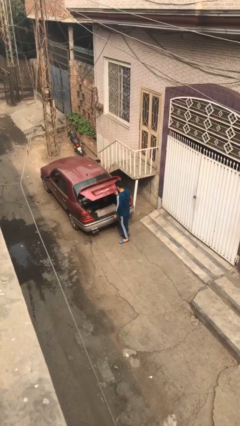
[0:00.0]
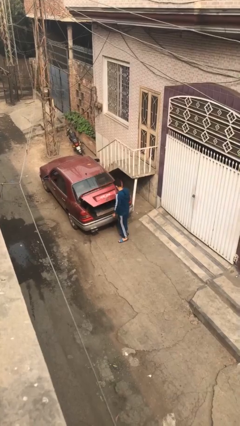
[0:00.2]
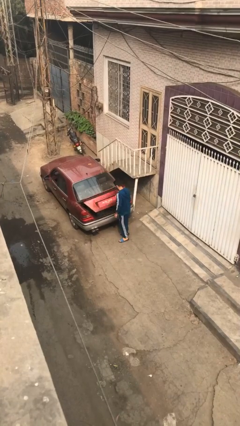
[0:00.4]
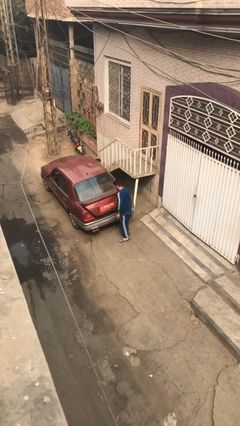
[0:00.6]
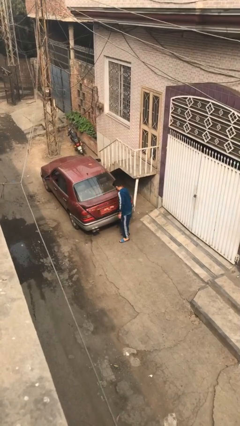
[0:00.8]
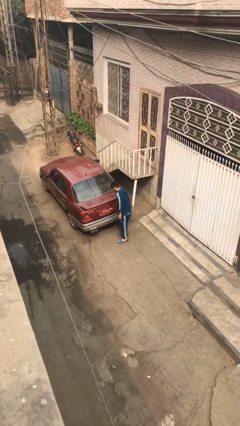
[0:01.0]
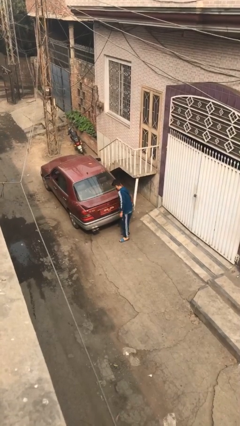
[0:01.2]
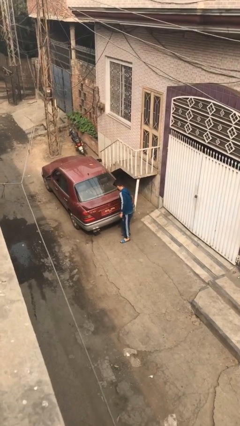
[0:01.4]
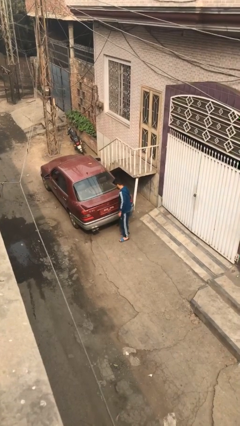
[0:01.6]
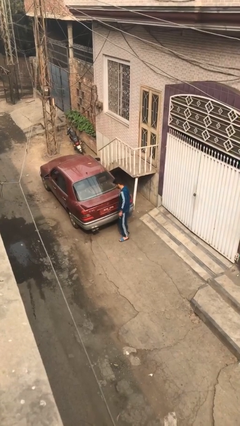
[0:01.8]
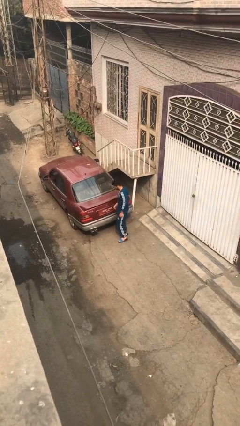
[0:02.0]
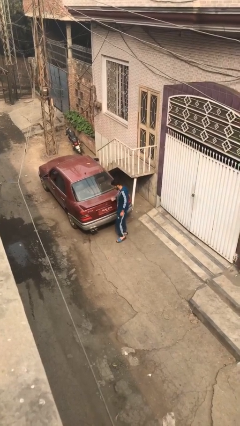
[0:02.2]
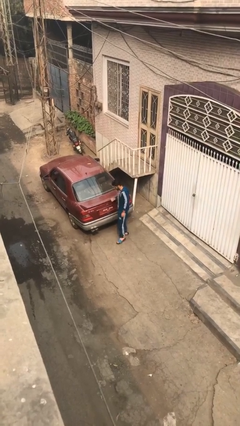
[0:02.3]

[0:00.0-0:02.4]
person closes car trunk

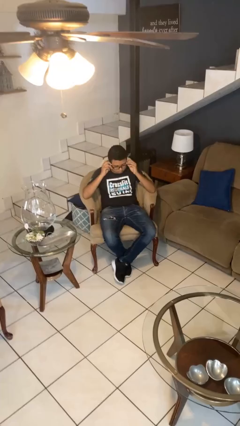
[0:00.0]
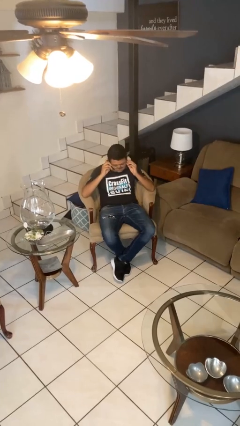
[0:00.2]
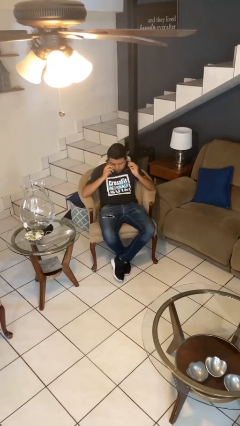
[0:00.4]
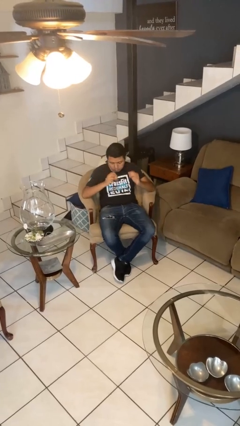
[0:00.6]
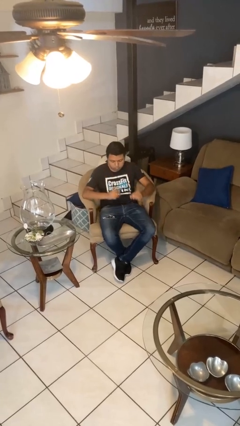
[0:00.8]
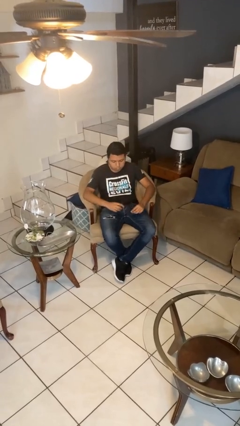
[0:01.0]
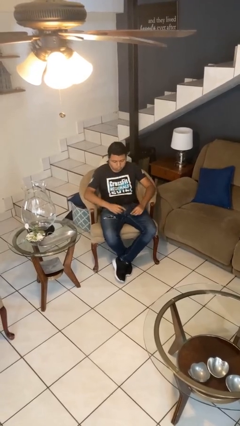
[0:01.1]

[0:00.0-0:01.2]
person takes off glasses

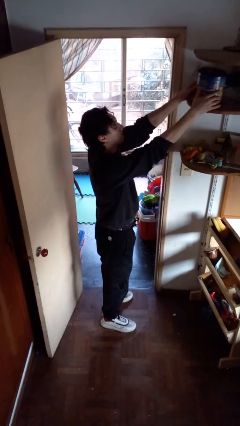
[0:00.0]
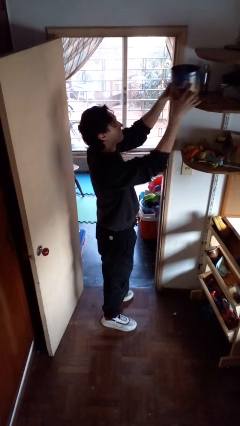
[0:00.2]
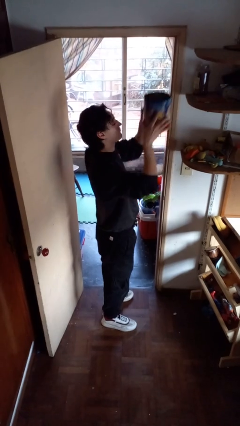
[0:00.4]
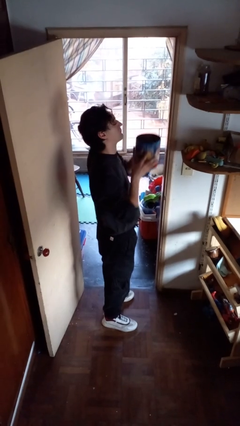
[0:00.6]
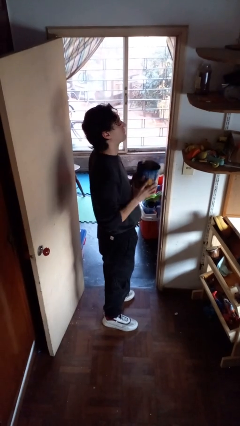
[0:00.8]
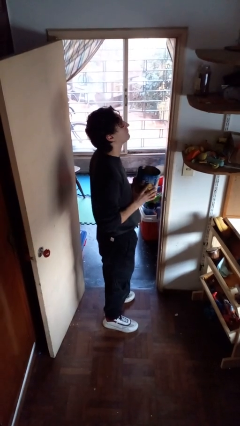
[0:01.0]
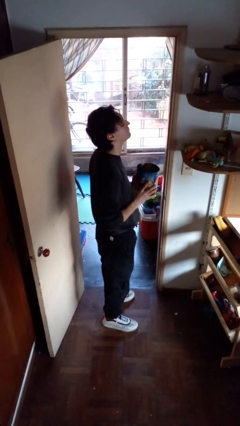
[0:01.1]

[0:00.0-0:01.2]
person picks up object from shelf

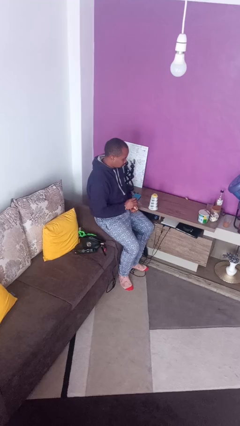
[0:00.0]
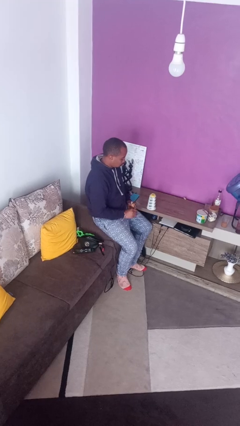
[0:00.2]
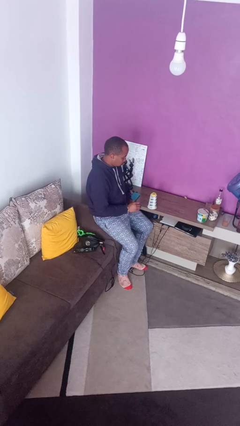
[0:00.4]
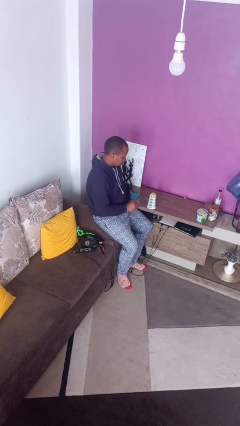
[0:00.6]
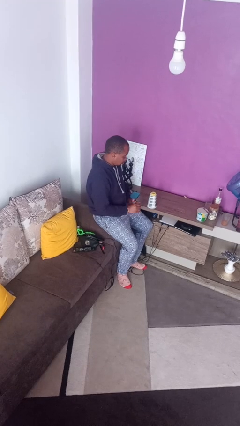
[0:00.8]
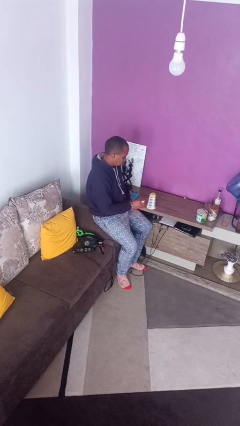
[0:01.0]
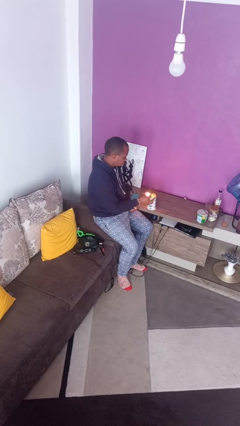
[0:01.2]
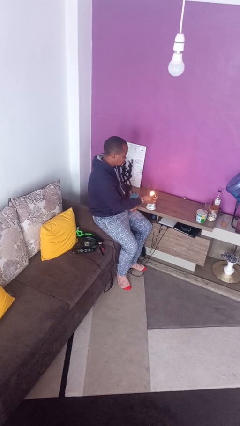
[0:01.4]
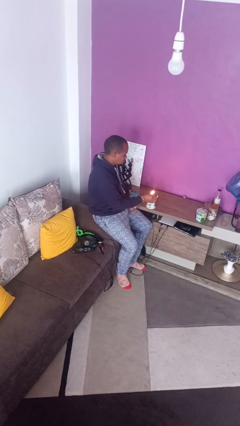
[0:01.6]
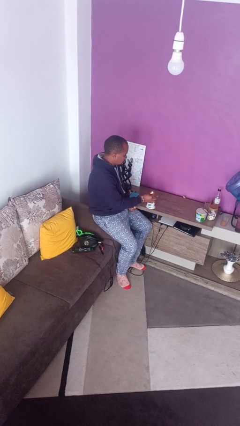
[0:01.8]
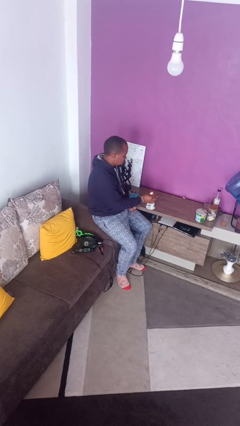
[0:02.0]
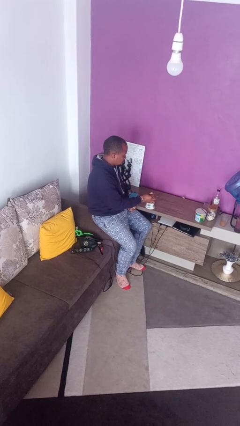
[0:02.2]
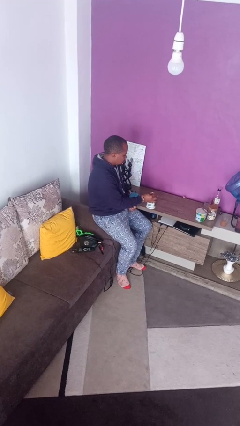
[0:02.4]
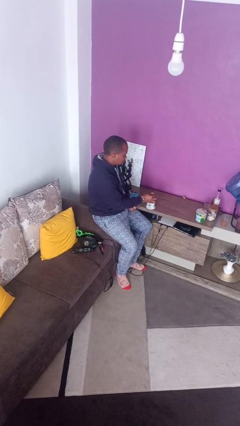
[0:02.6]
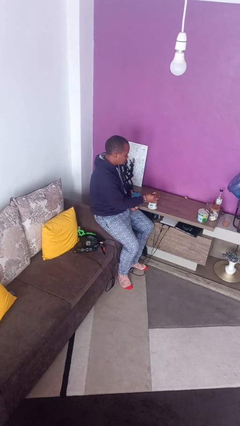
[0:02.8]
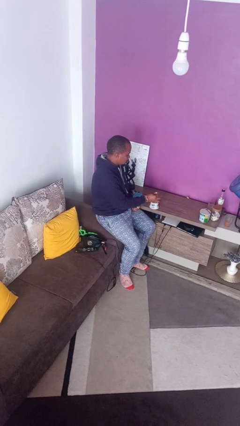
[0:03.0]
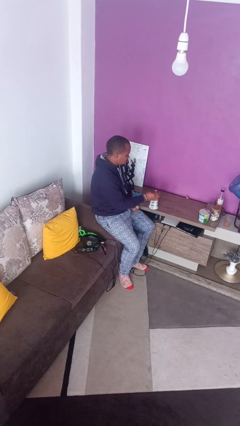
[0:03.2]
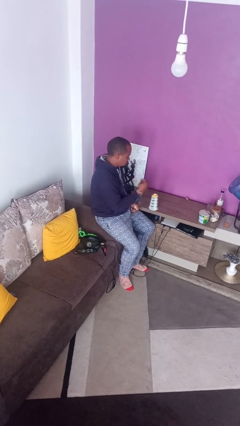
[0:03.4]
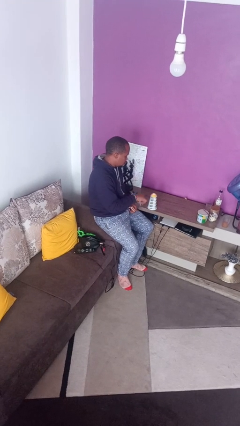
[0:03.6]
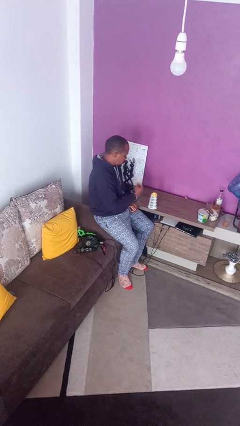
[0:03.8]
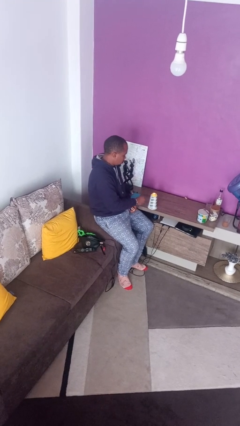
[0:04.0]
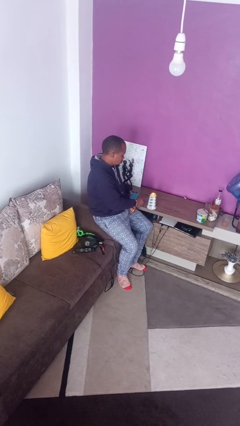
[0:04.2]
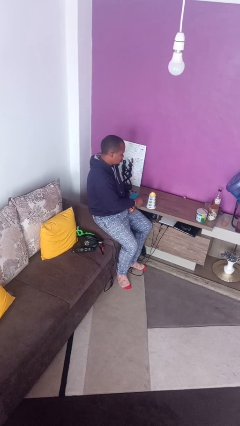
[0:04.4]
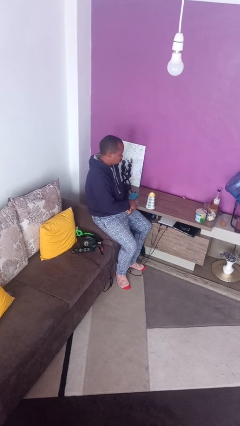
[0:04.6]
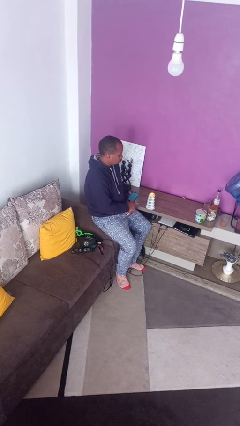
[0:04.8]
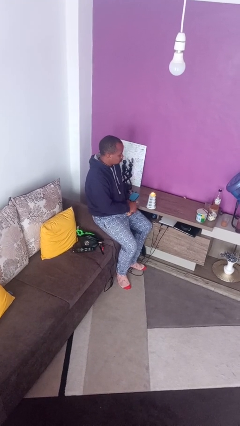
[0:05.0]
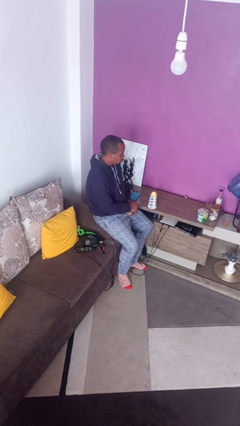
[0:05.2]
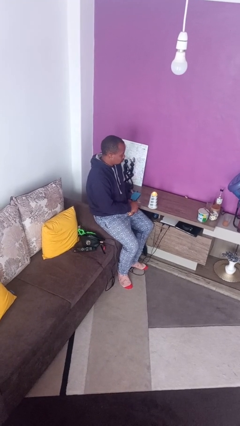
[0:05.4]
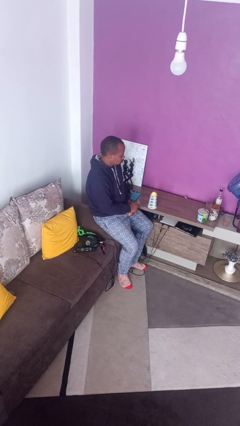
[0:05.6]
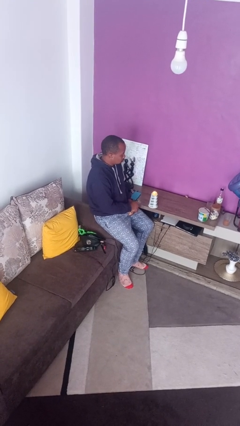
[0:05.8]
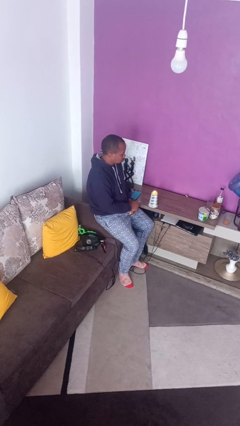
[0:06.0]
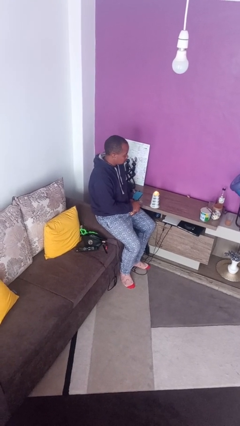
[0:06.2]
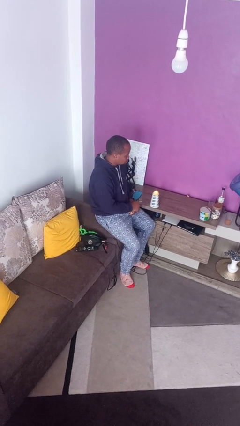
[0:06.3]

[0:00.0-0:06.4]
person lights candle

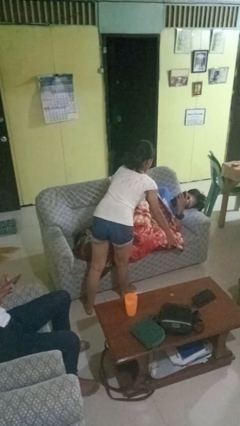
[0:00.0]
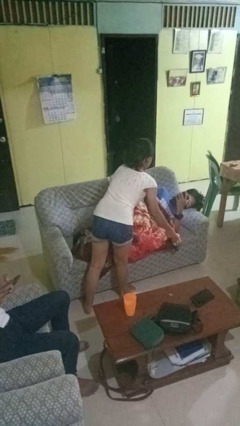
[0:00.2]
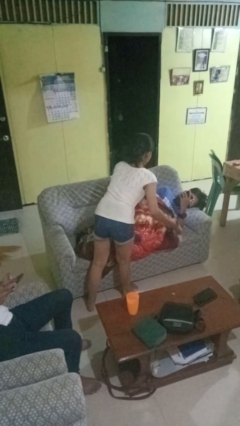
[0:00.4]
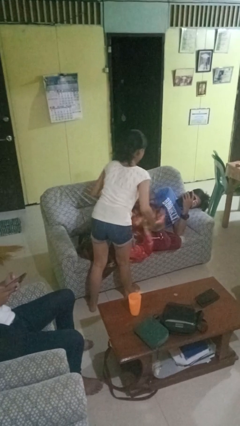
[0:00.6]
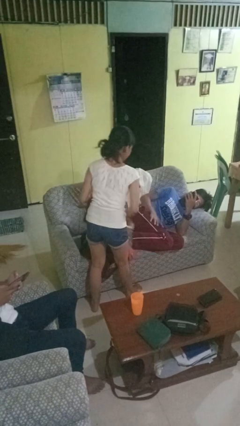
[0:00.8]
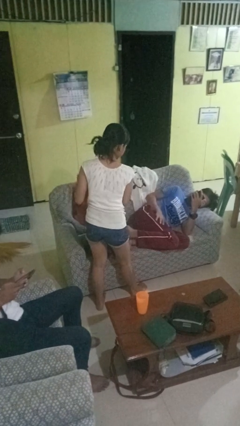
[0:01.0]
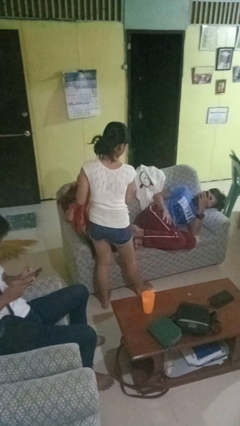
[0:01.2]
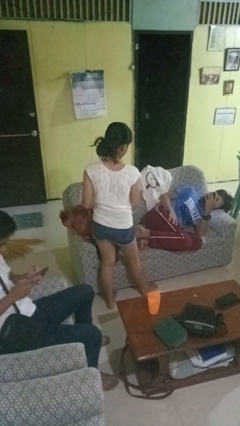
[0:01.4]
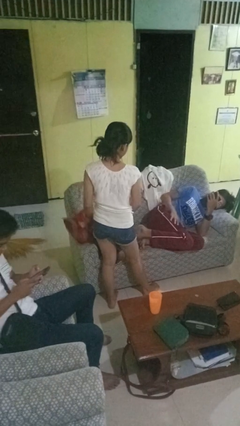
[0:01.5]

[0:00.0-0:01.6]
person uncovers friend with blanket

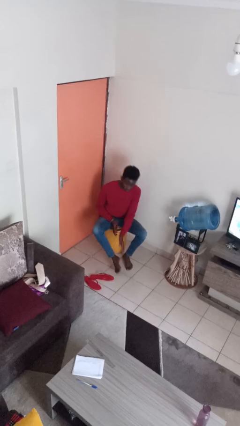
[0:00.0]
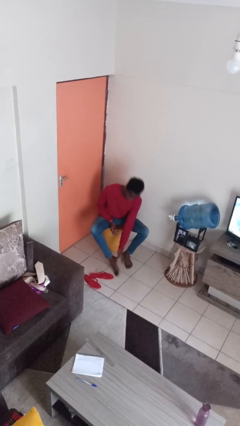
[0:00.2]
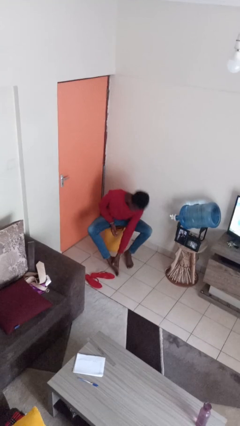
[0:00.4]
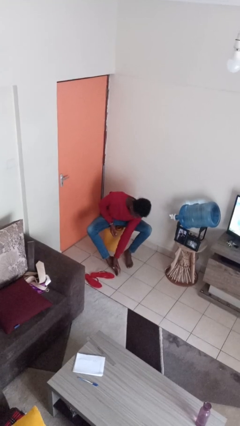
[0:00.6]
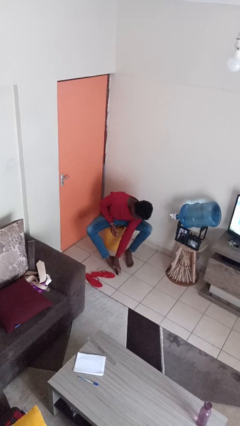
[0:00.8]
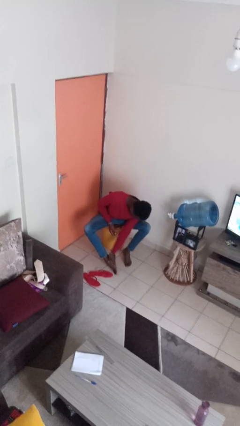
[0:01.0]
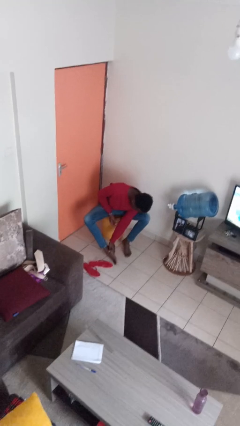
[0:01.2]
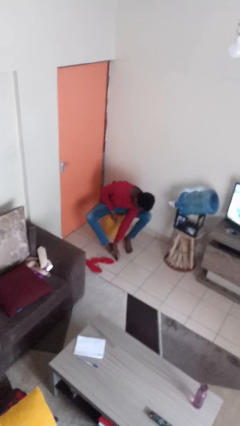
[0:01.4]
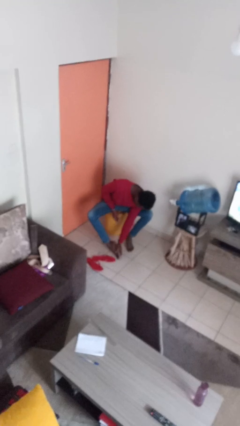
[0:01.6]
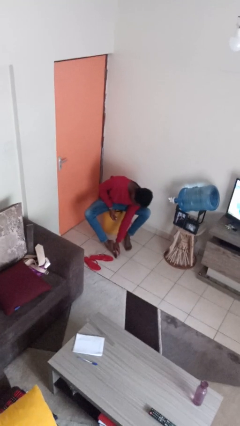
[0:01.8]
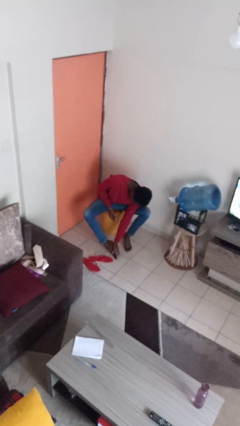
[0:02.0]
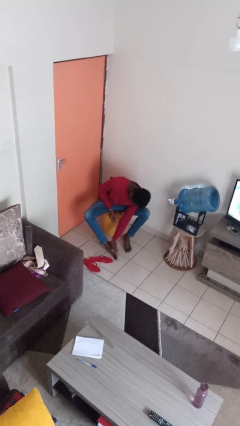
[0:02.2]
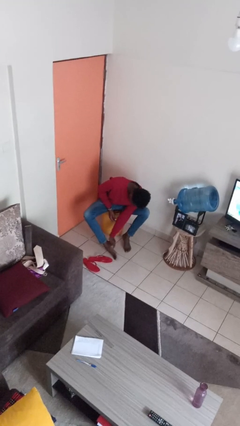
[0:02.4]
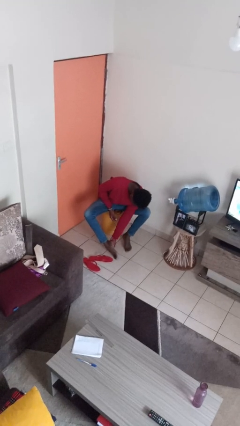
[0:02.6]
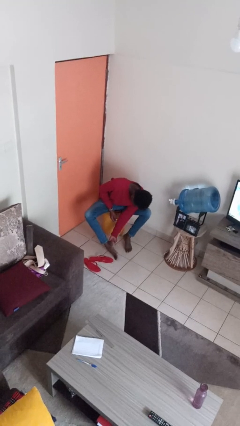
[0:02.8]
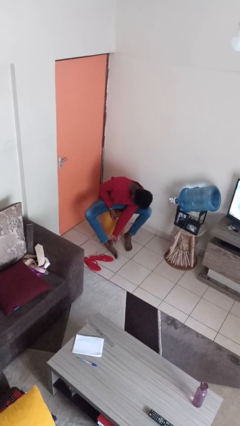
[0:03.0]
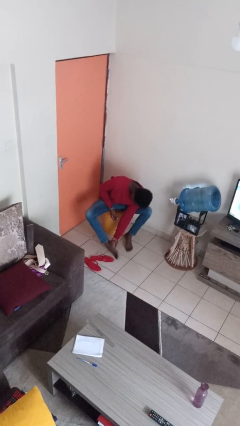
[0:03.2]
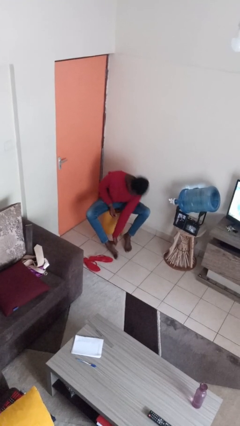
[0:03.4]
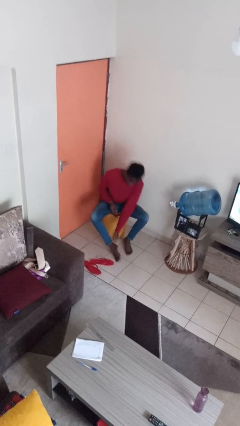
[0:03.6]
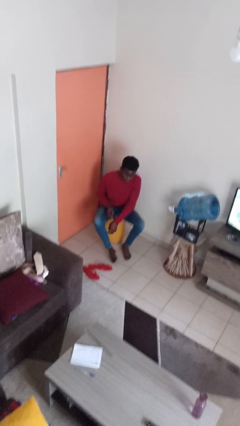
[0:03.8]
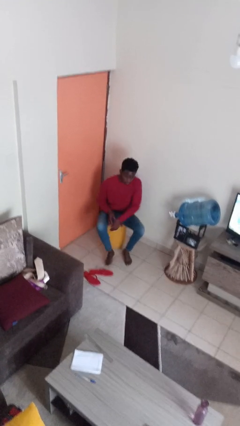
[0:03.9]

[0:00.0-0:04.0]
person rubs foot

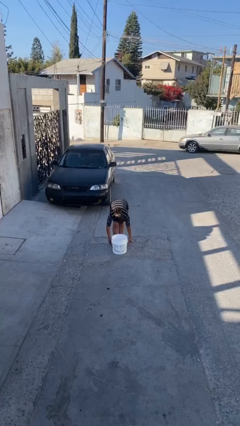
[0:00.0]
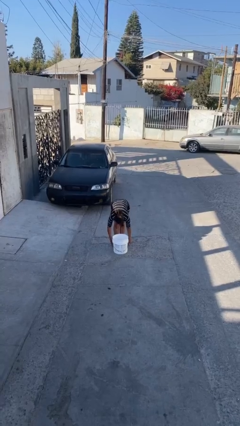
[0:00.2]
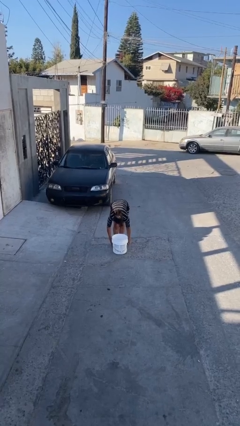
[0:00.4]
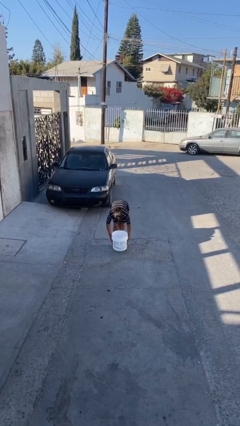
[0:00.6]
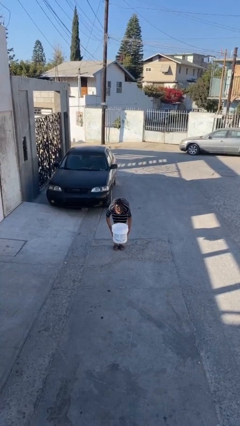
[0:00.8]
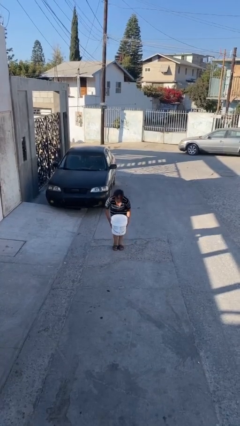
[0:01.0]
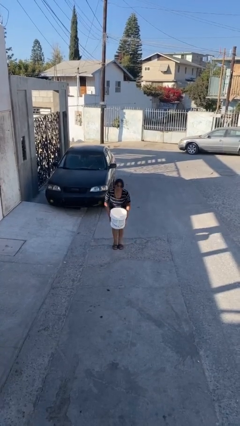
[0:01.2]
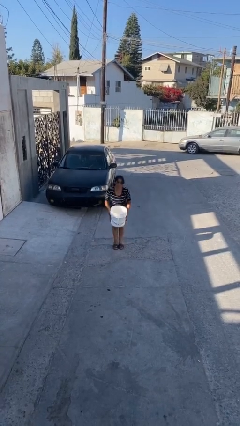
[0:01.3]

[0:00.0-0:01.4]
person picks up object from floor
